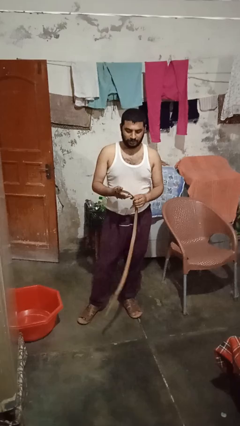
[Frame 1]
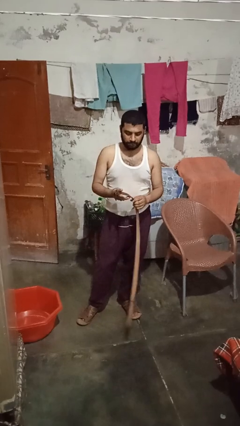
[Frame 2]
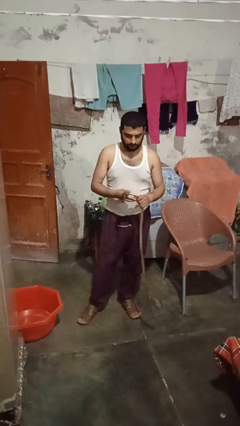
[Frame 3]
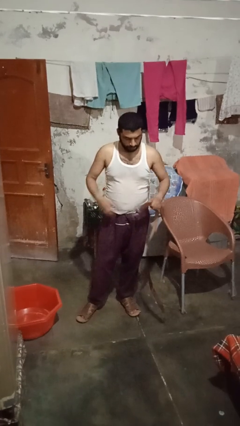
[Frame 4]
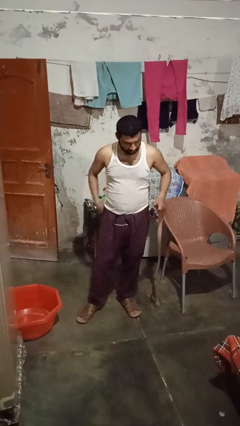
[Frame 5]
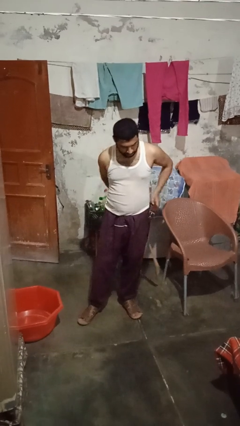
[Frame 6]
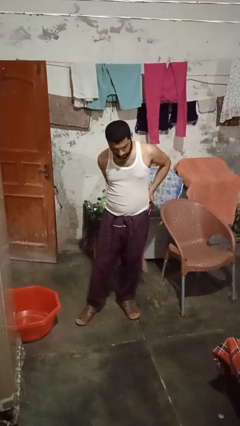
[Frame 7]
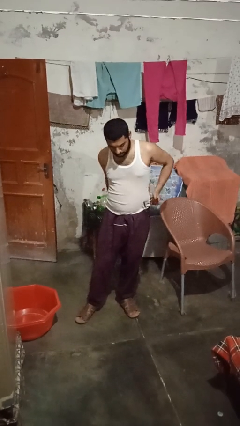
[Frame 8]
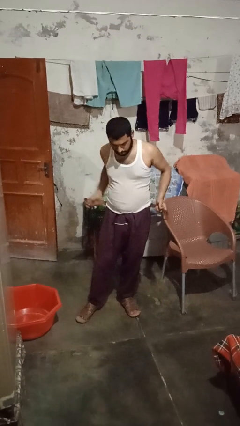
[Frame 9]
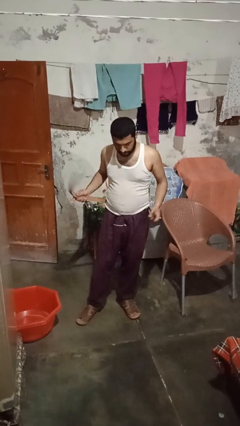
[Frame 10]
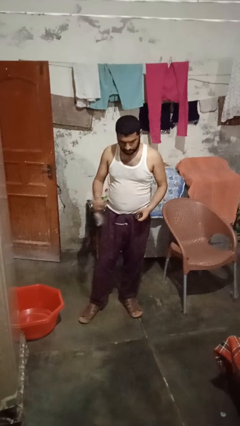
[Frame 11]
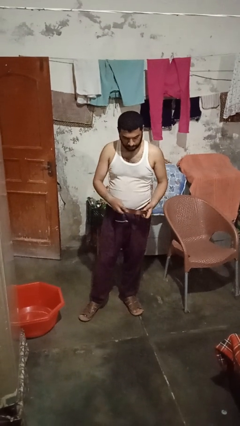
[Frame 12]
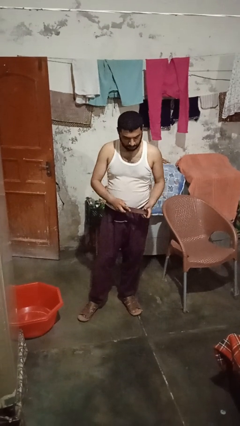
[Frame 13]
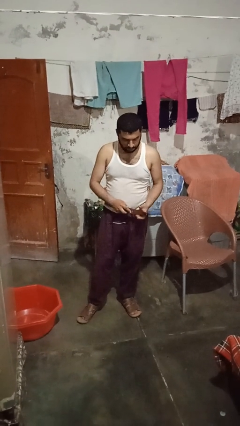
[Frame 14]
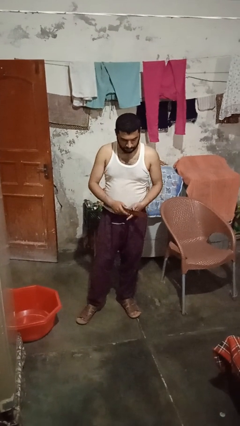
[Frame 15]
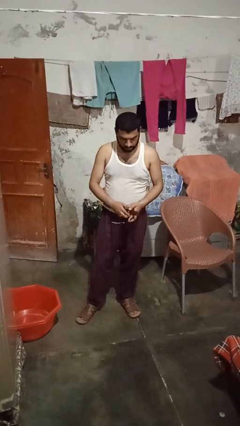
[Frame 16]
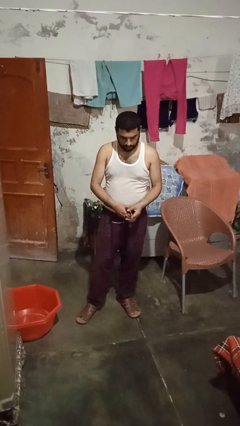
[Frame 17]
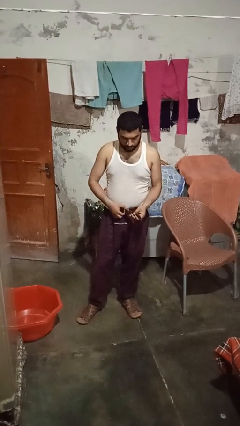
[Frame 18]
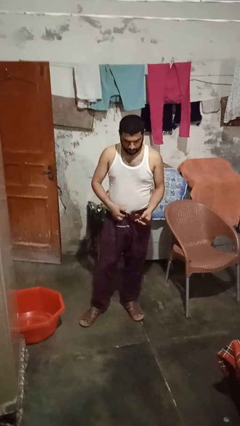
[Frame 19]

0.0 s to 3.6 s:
person puts on belt

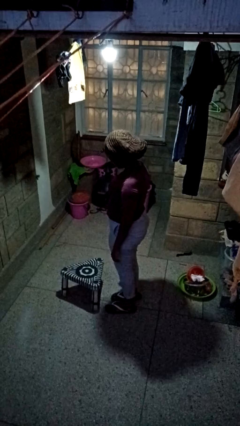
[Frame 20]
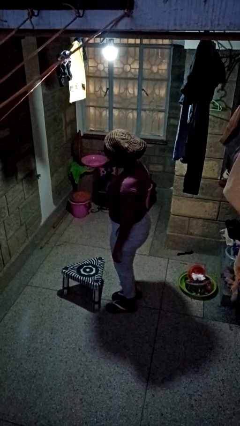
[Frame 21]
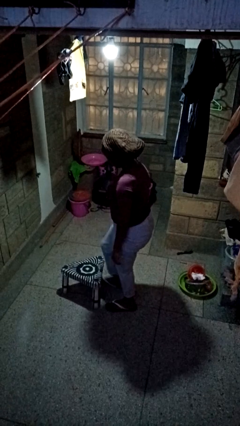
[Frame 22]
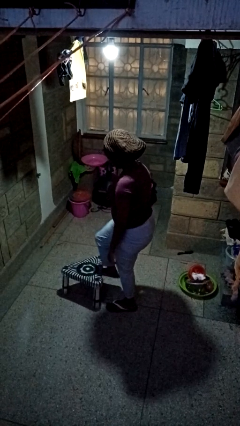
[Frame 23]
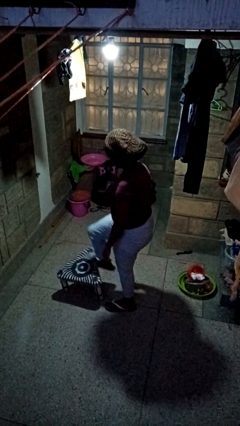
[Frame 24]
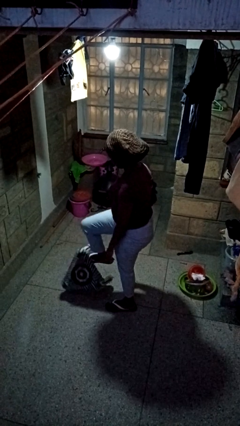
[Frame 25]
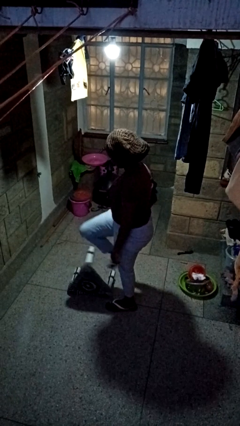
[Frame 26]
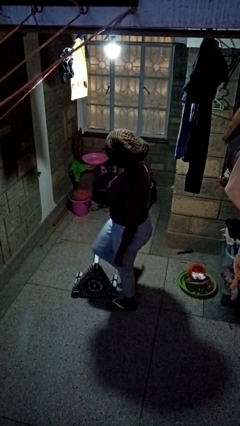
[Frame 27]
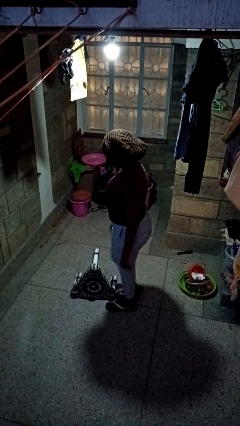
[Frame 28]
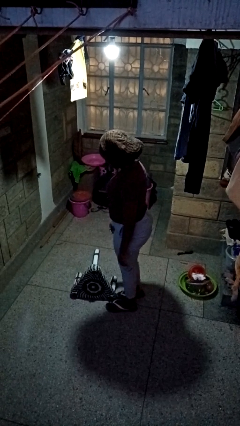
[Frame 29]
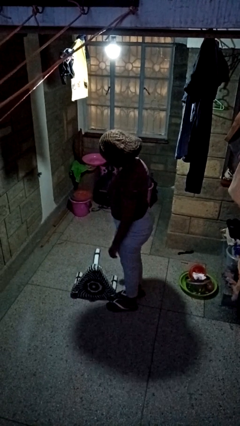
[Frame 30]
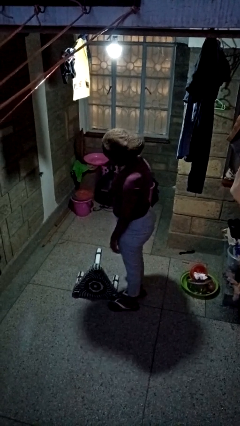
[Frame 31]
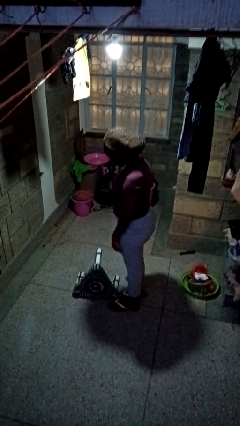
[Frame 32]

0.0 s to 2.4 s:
person knocks over furniture

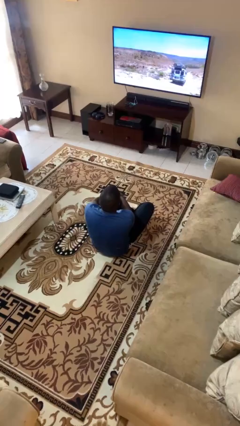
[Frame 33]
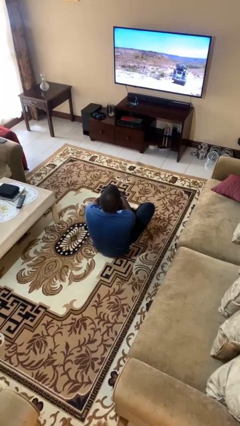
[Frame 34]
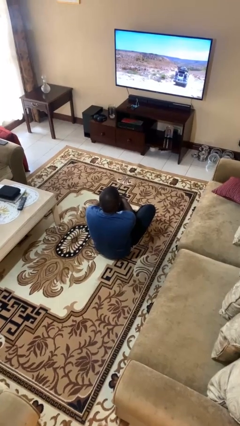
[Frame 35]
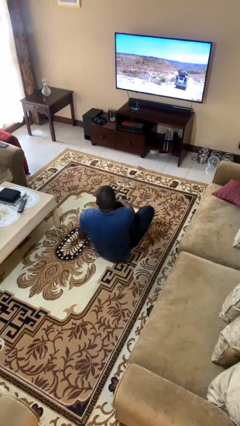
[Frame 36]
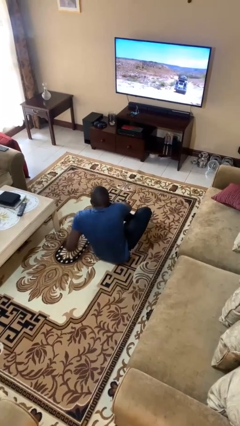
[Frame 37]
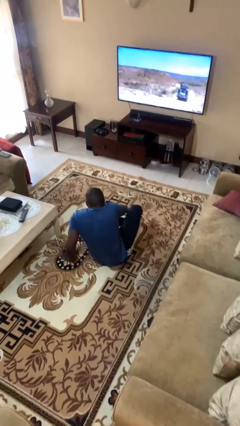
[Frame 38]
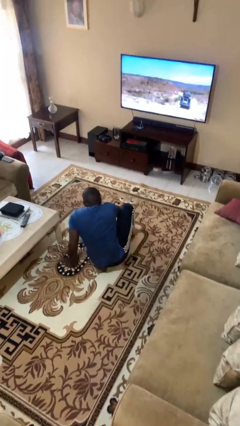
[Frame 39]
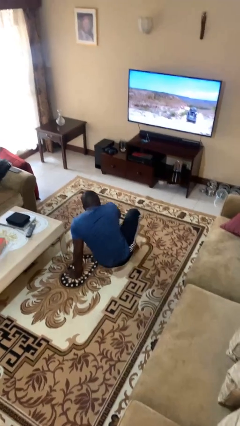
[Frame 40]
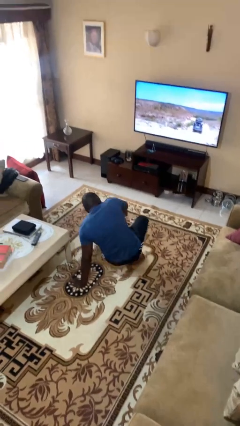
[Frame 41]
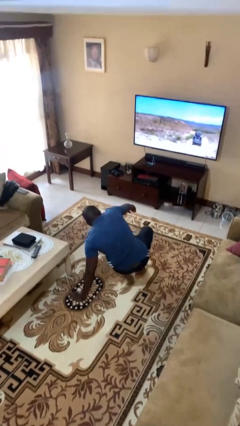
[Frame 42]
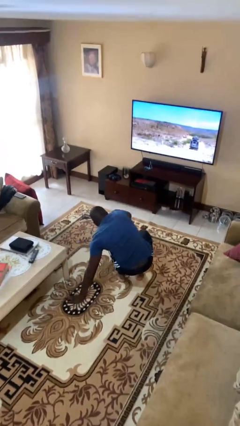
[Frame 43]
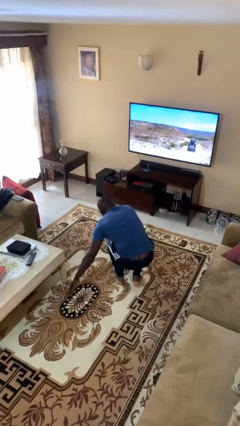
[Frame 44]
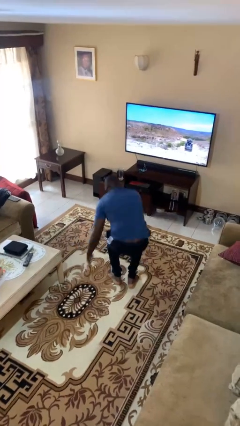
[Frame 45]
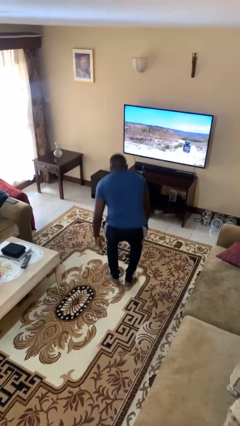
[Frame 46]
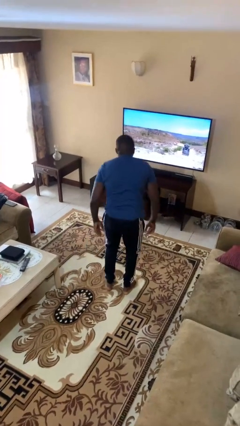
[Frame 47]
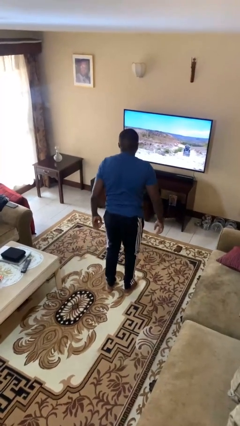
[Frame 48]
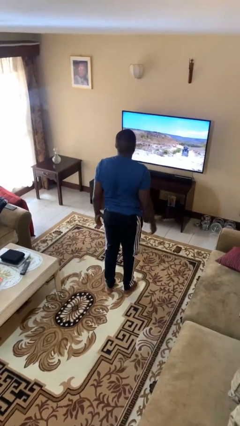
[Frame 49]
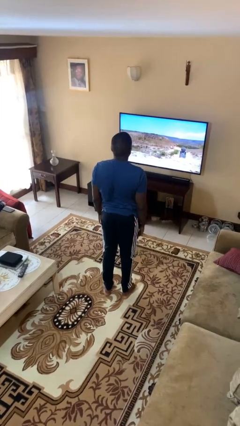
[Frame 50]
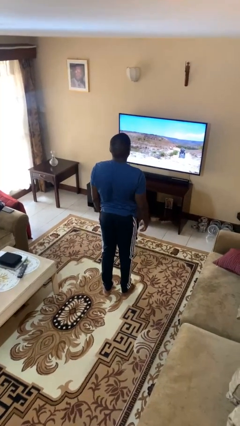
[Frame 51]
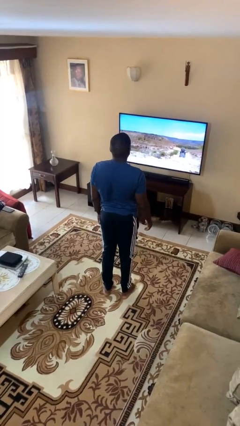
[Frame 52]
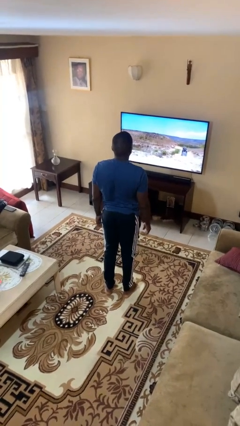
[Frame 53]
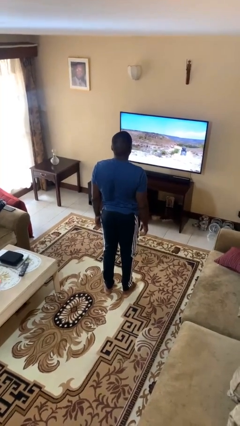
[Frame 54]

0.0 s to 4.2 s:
person stands up from floor

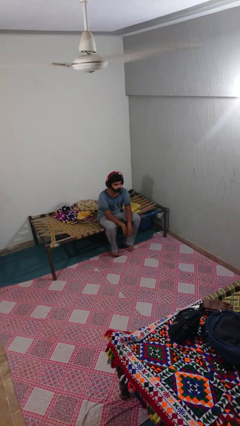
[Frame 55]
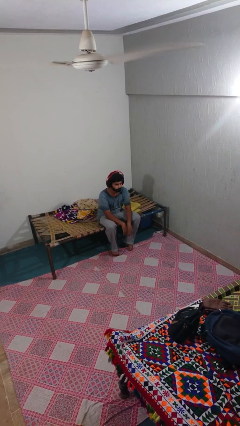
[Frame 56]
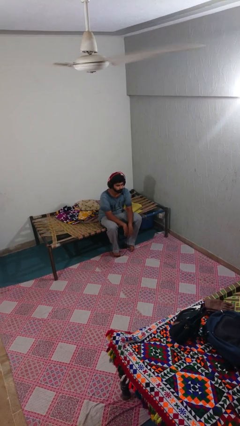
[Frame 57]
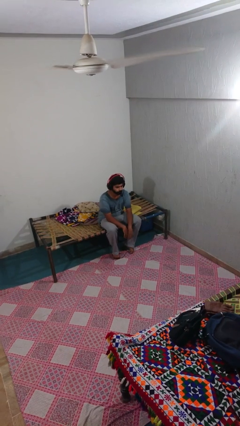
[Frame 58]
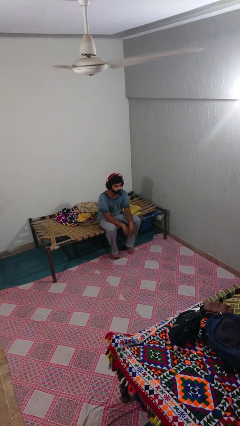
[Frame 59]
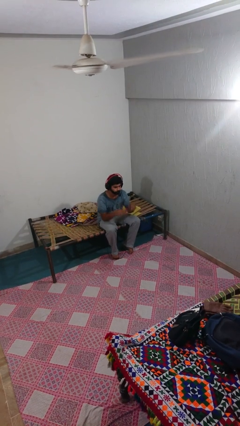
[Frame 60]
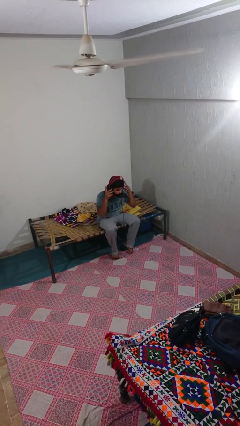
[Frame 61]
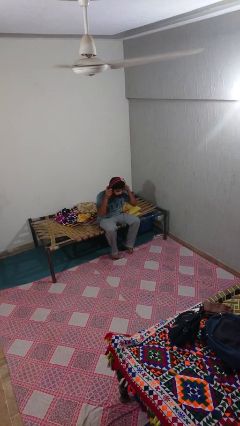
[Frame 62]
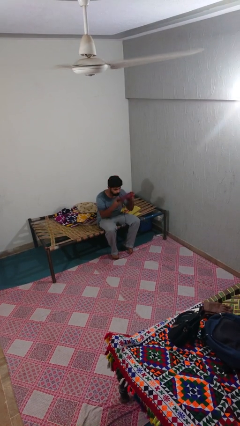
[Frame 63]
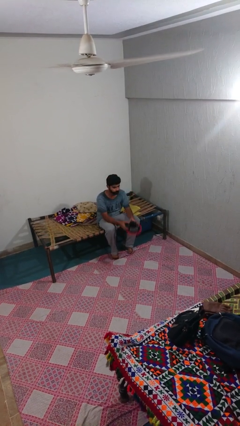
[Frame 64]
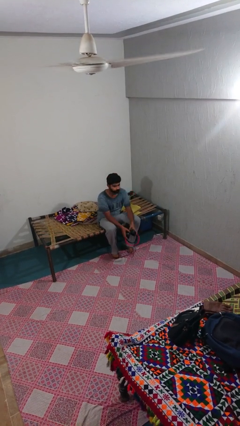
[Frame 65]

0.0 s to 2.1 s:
person takes off headphones

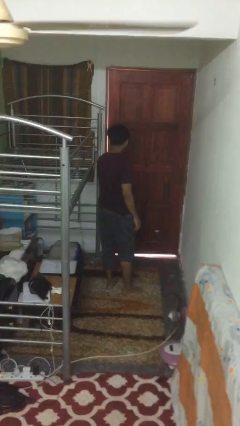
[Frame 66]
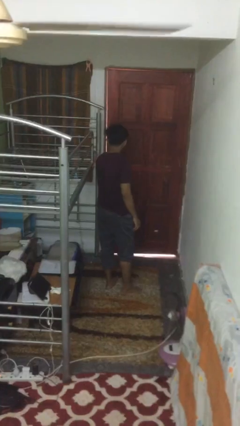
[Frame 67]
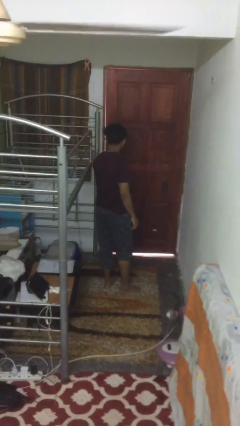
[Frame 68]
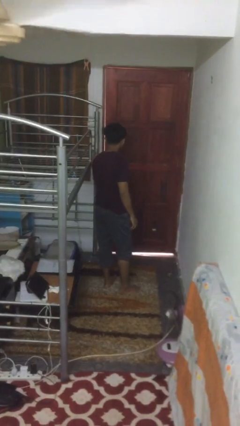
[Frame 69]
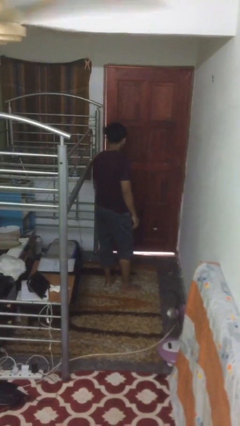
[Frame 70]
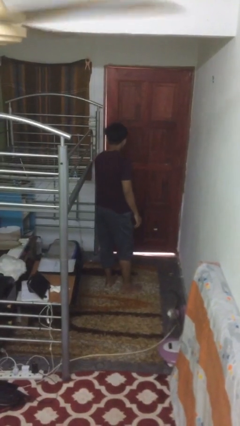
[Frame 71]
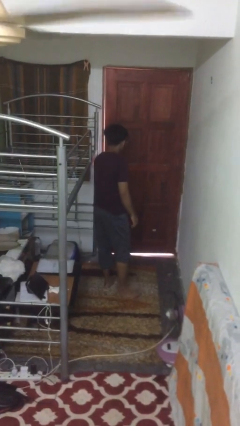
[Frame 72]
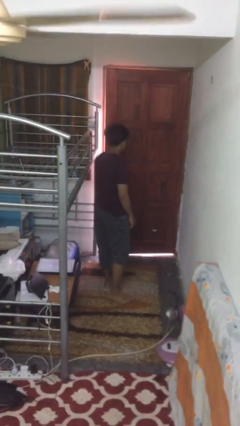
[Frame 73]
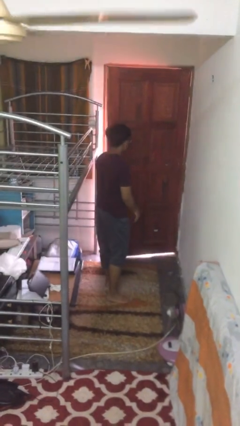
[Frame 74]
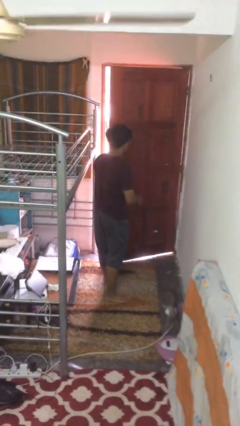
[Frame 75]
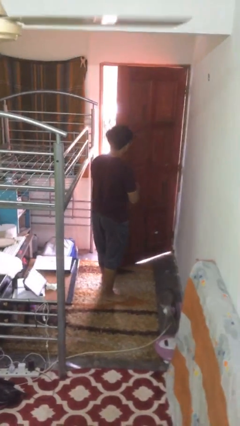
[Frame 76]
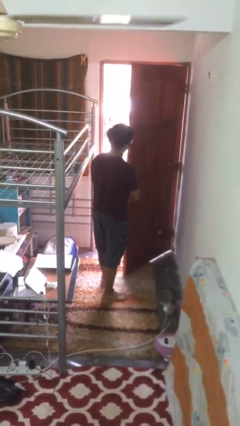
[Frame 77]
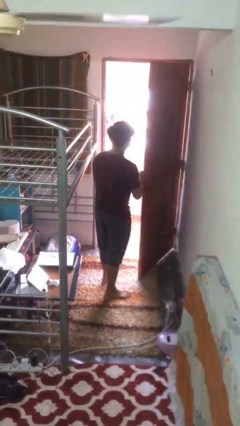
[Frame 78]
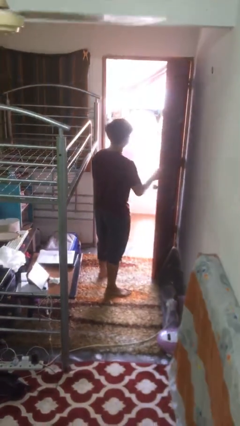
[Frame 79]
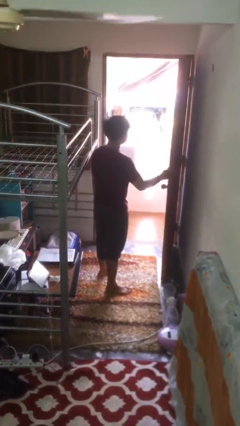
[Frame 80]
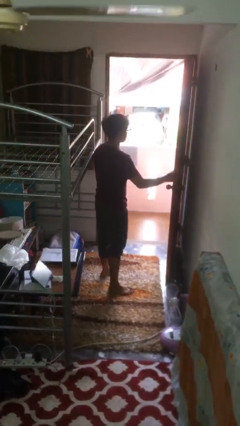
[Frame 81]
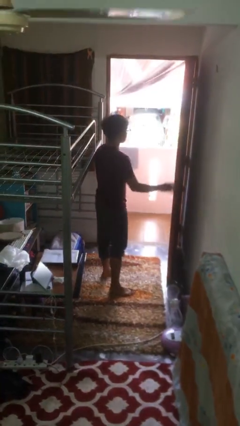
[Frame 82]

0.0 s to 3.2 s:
person opens facility door

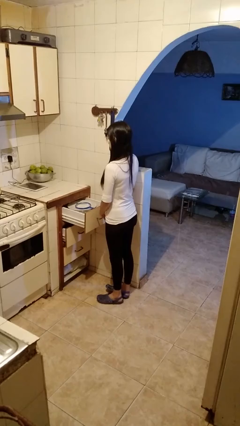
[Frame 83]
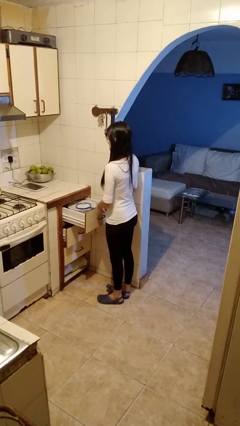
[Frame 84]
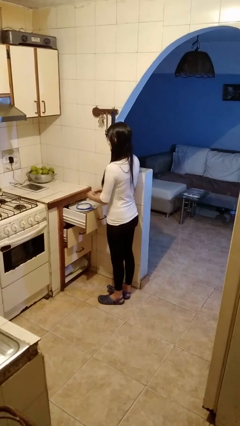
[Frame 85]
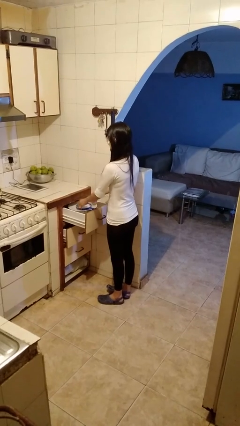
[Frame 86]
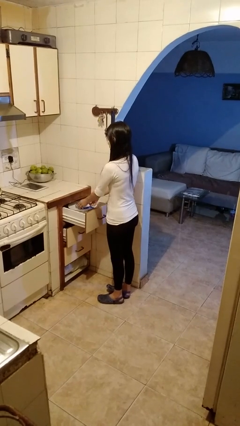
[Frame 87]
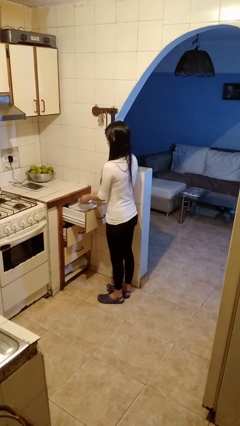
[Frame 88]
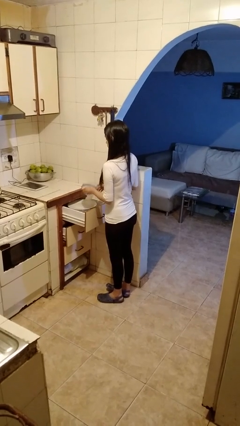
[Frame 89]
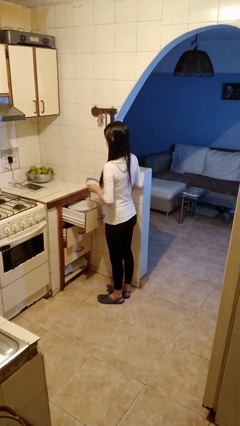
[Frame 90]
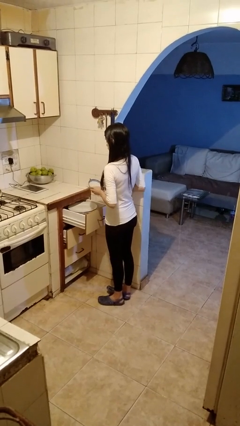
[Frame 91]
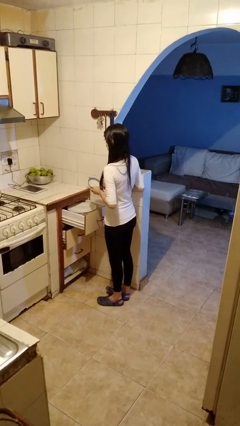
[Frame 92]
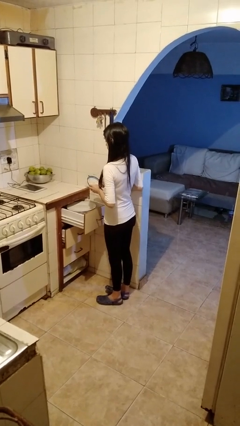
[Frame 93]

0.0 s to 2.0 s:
person picks up object from cabinet
